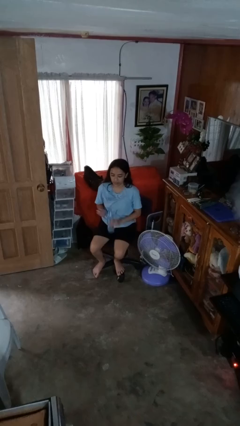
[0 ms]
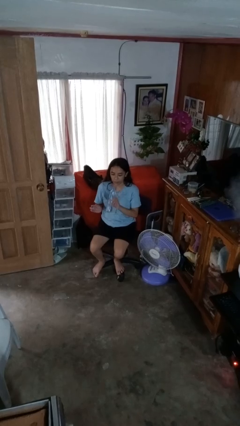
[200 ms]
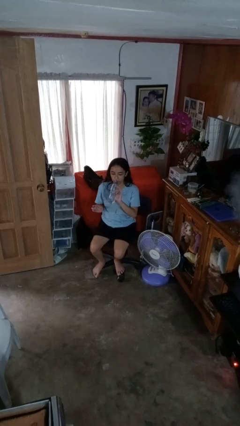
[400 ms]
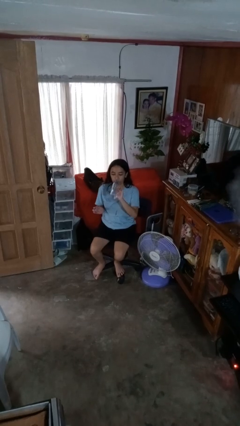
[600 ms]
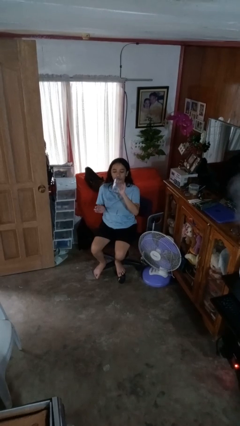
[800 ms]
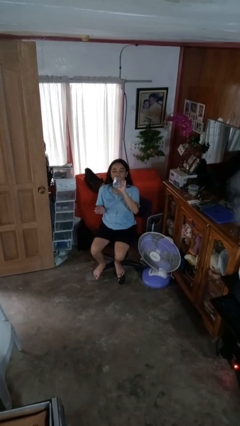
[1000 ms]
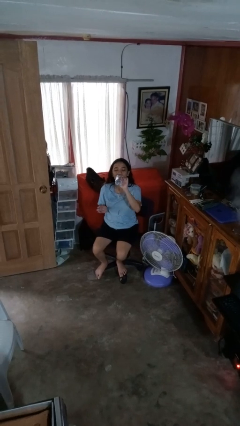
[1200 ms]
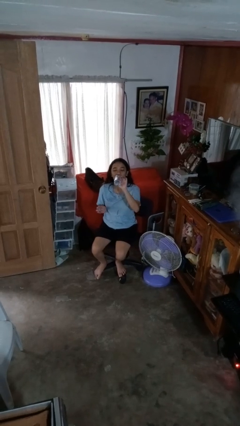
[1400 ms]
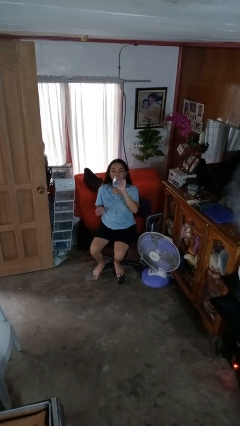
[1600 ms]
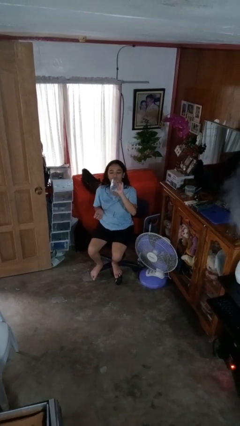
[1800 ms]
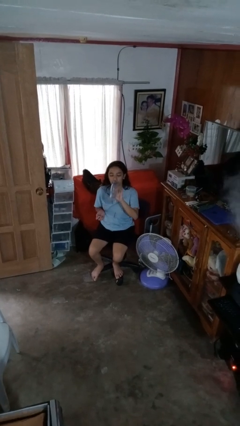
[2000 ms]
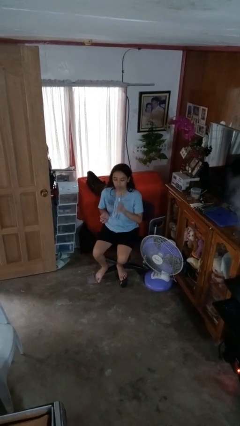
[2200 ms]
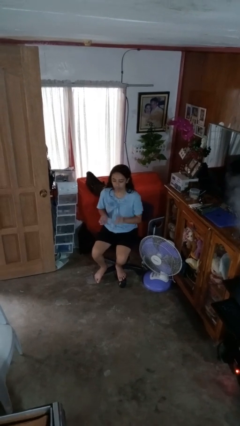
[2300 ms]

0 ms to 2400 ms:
person drinks from bottle

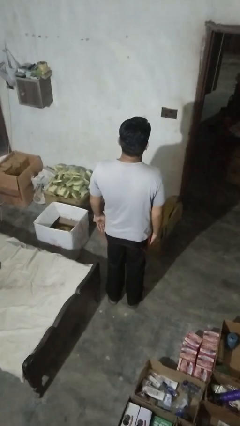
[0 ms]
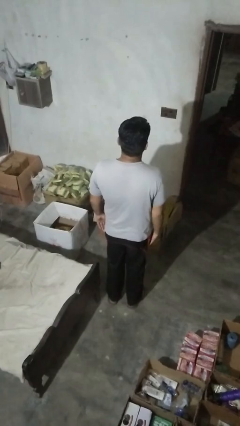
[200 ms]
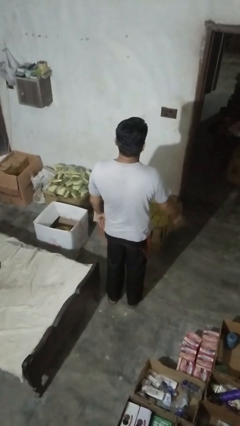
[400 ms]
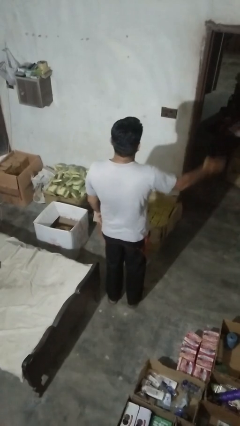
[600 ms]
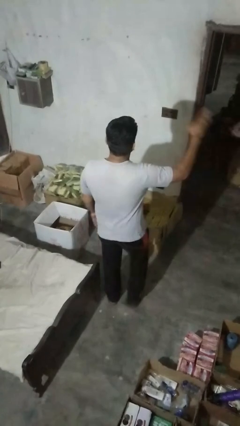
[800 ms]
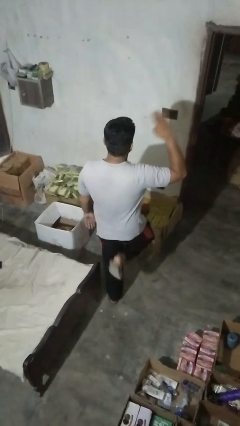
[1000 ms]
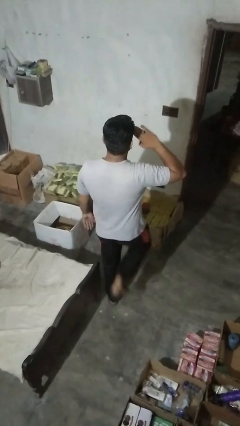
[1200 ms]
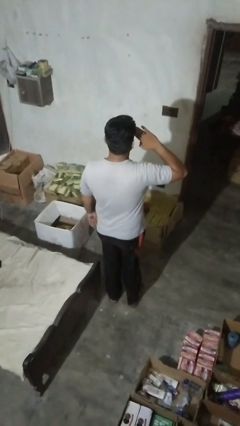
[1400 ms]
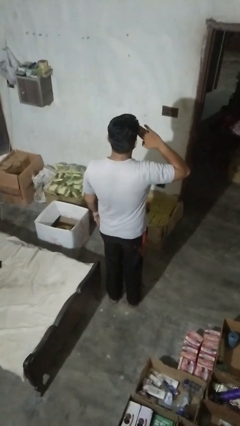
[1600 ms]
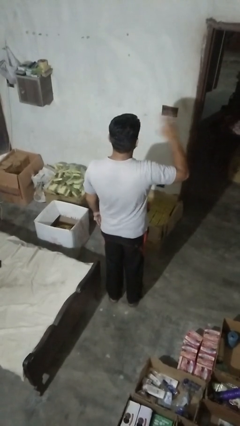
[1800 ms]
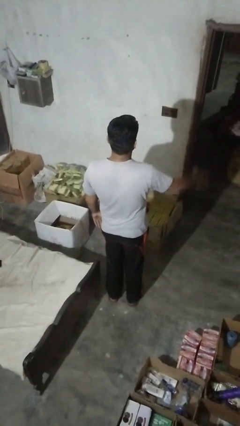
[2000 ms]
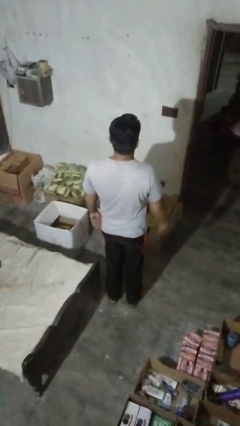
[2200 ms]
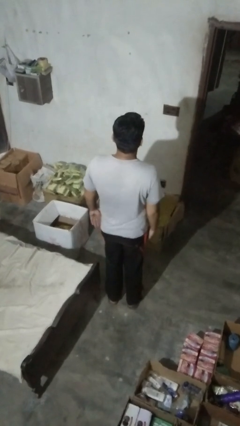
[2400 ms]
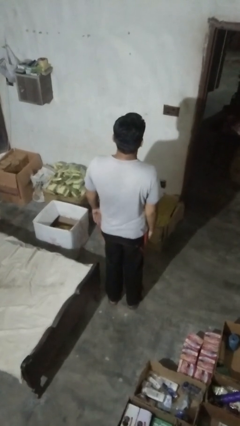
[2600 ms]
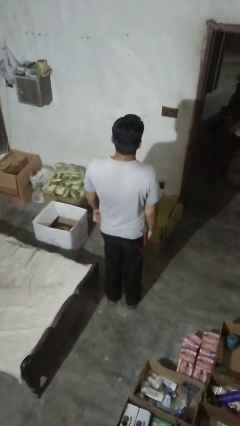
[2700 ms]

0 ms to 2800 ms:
person salutes

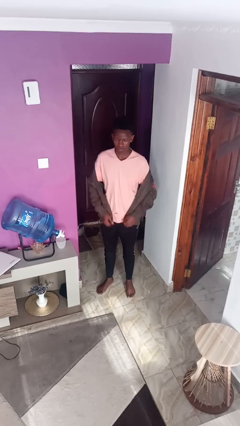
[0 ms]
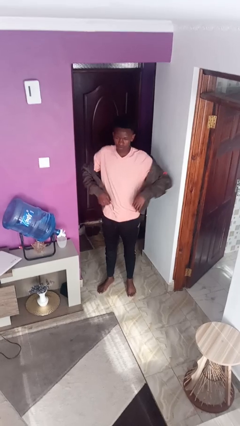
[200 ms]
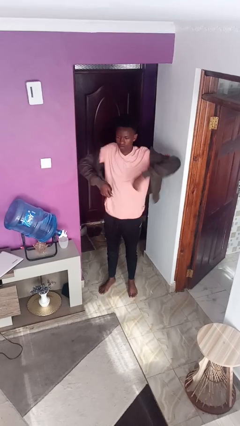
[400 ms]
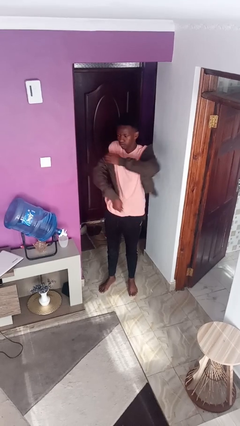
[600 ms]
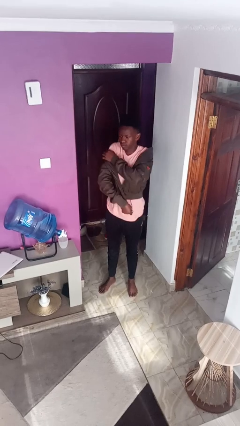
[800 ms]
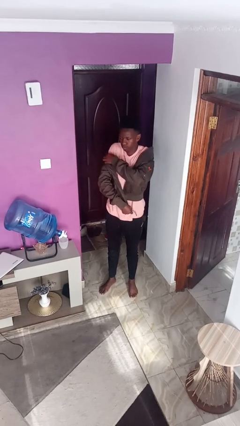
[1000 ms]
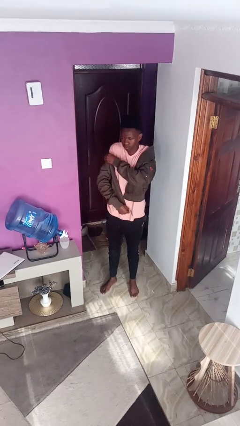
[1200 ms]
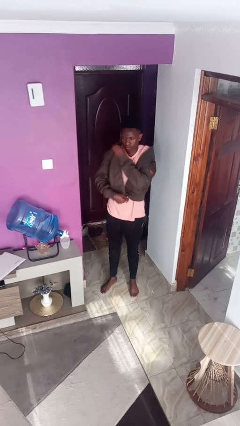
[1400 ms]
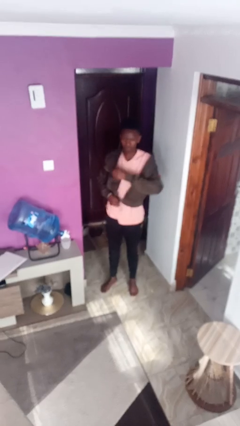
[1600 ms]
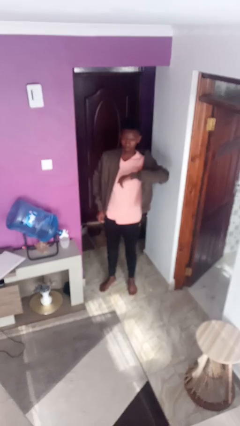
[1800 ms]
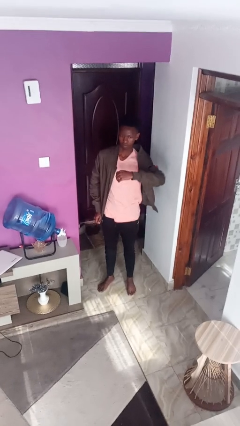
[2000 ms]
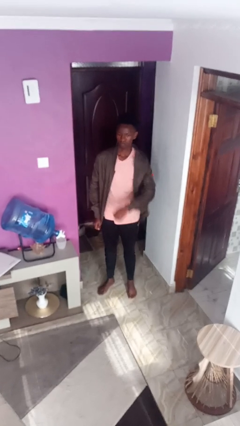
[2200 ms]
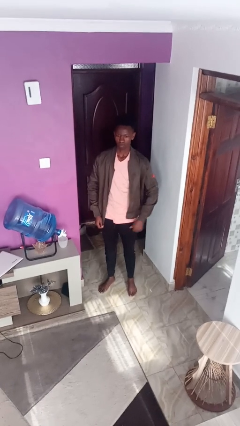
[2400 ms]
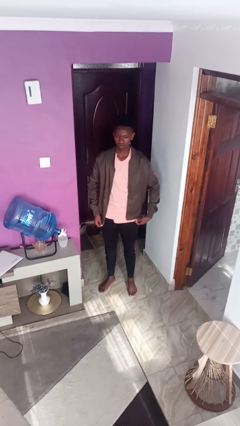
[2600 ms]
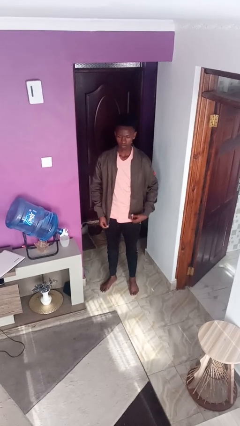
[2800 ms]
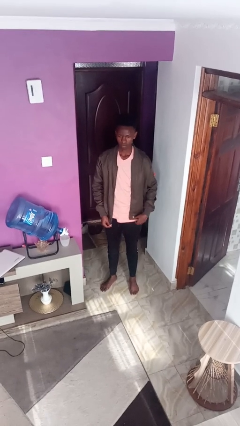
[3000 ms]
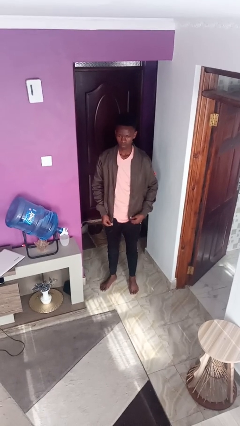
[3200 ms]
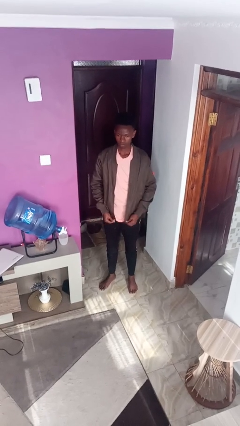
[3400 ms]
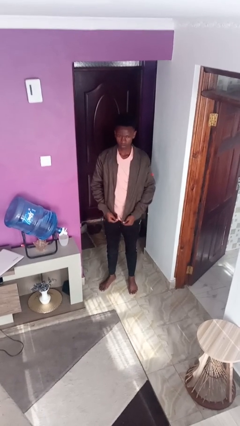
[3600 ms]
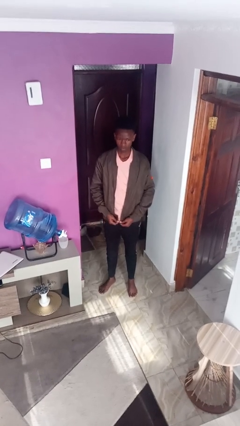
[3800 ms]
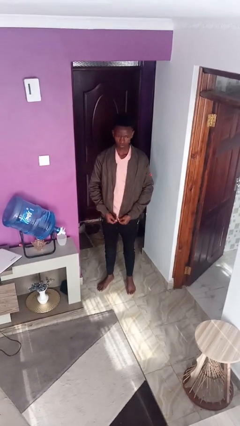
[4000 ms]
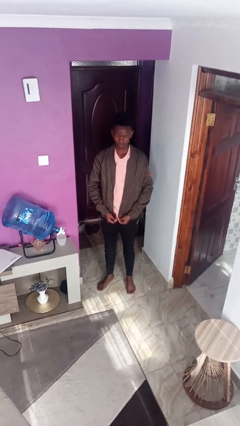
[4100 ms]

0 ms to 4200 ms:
person puts on jacket

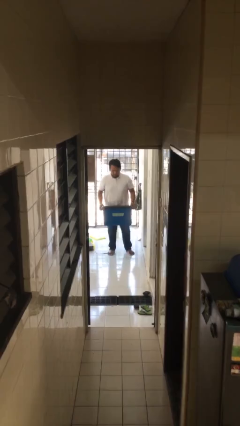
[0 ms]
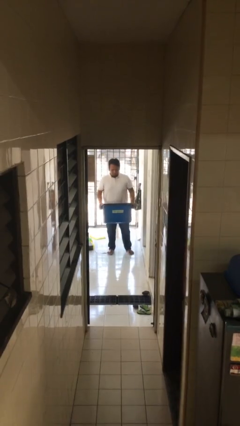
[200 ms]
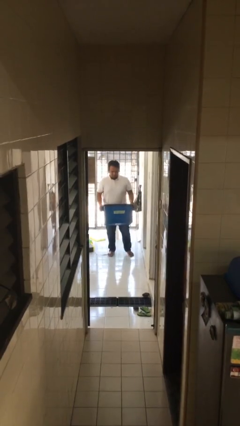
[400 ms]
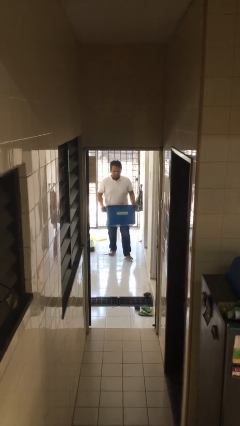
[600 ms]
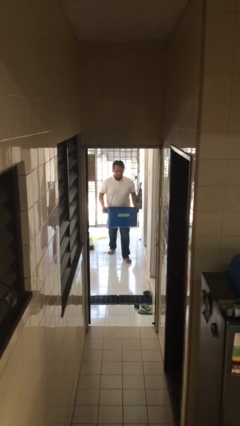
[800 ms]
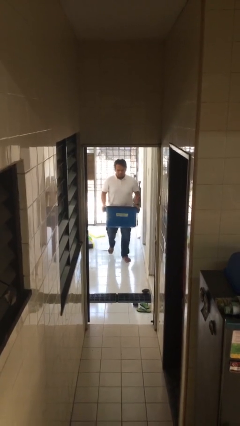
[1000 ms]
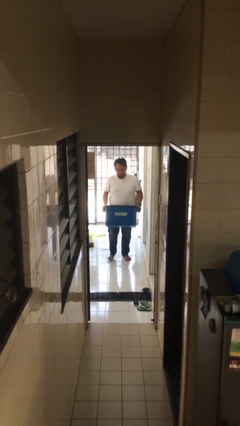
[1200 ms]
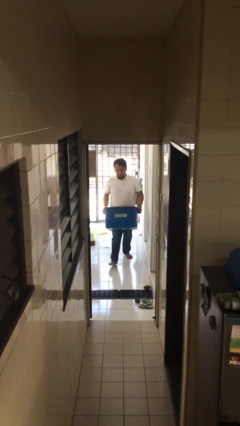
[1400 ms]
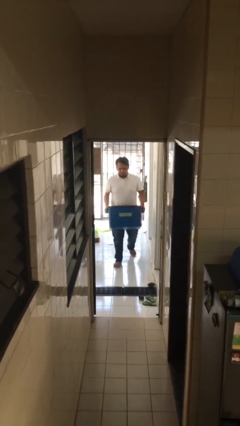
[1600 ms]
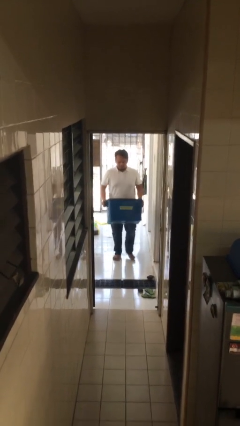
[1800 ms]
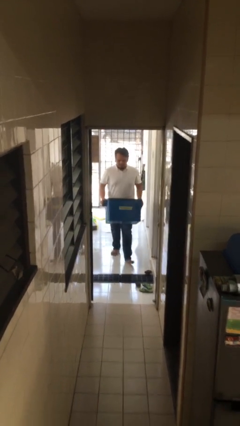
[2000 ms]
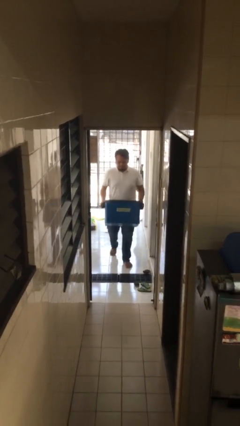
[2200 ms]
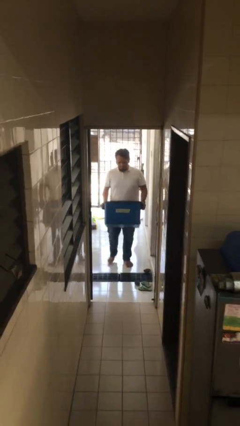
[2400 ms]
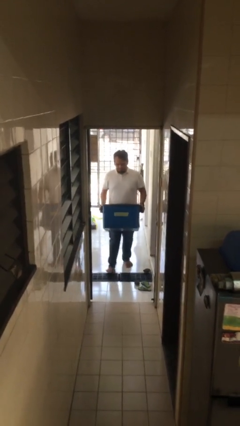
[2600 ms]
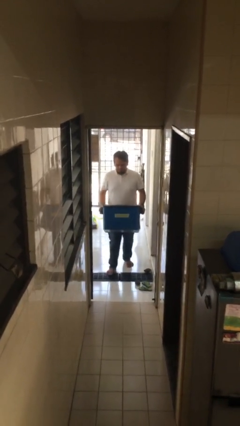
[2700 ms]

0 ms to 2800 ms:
person carries heavy object

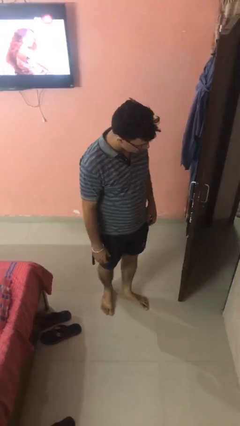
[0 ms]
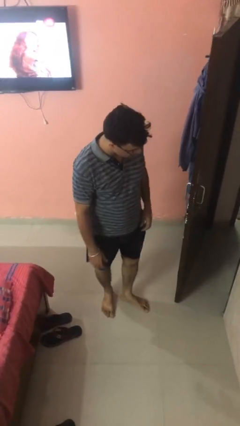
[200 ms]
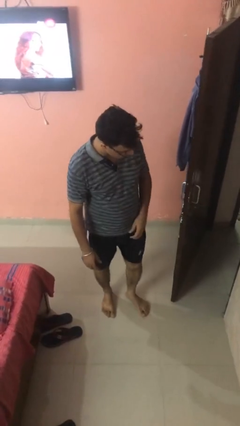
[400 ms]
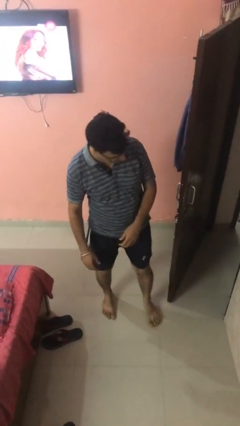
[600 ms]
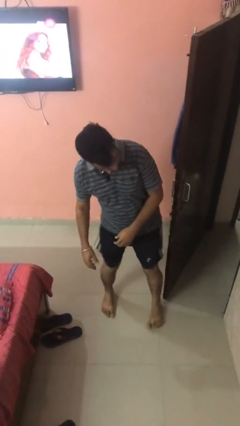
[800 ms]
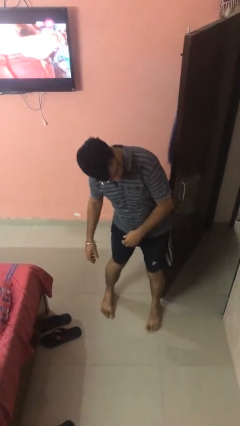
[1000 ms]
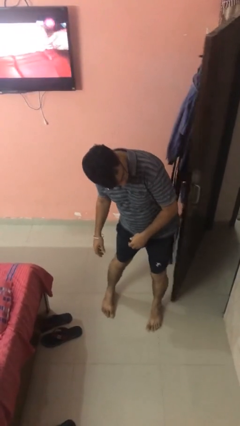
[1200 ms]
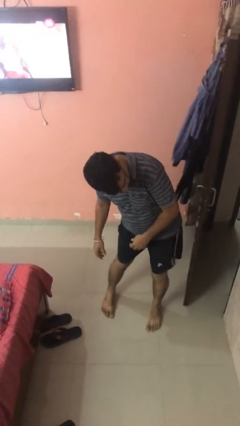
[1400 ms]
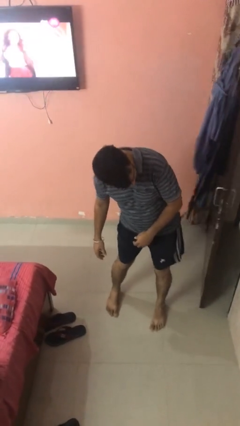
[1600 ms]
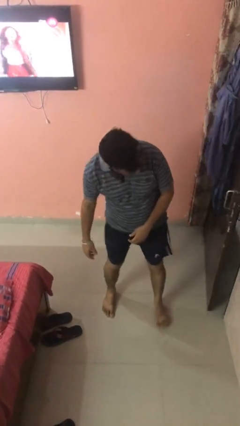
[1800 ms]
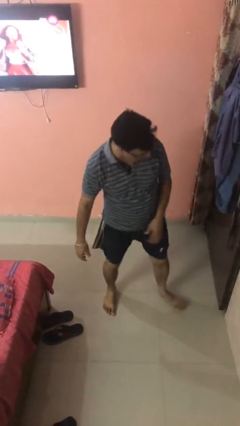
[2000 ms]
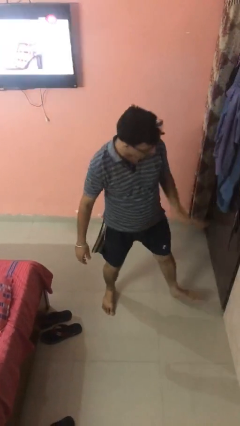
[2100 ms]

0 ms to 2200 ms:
person closes door with hip

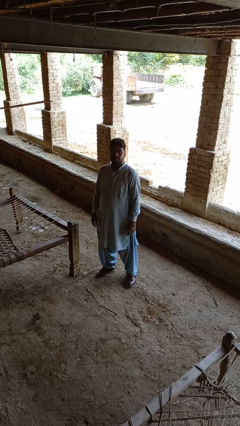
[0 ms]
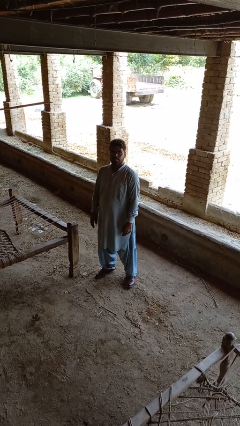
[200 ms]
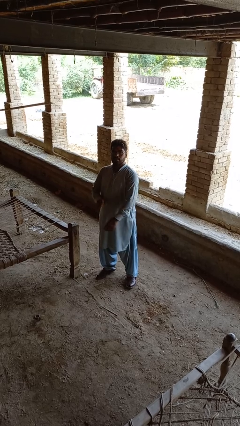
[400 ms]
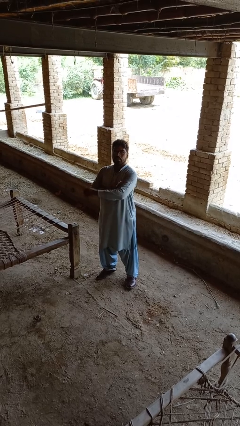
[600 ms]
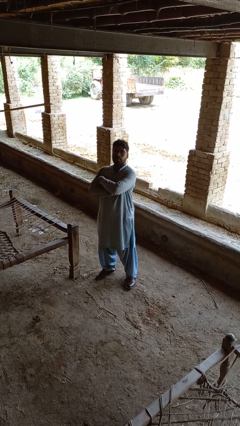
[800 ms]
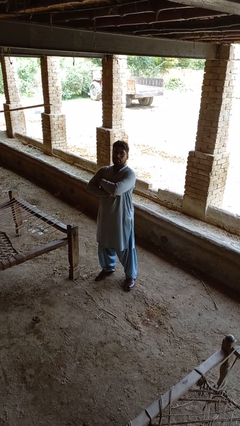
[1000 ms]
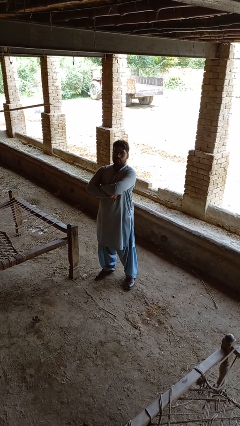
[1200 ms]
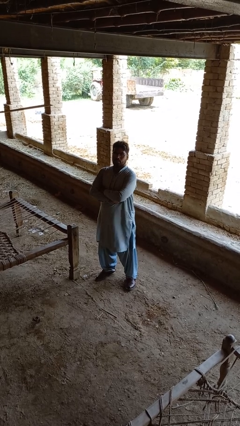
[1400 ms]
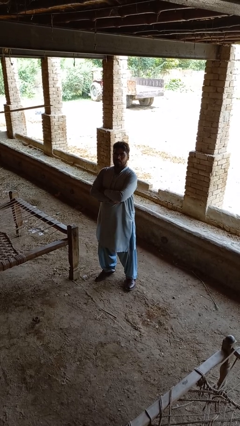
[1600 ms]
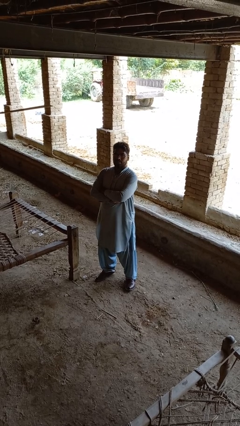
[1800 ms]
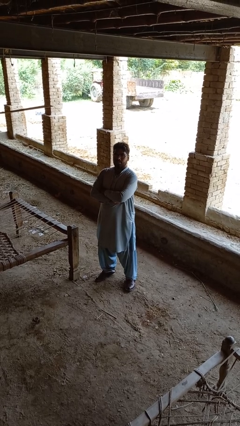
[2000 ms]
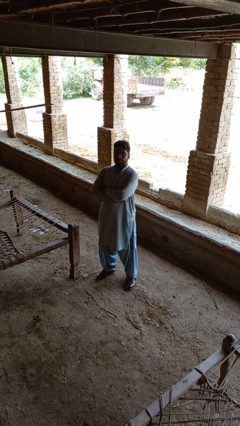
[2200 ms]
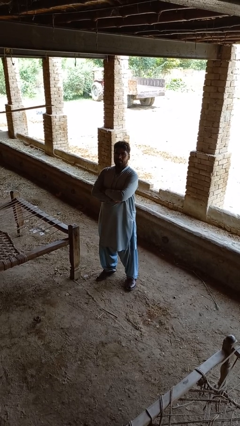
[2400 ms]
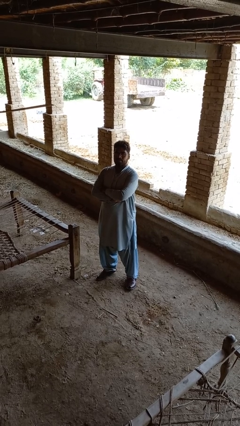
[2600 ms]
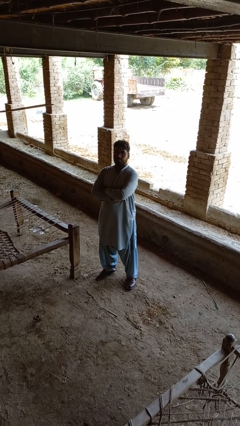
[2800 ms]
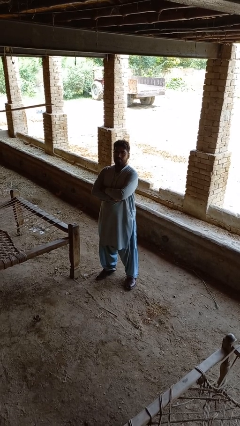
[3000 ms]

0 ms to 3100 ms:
person crosses arms
